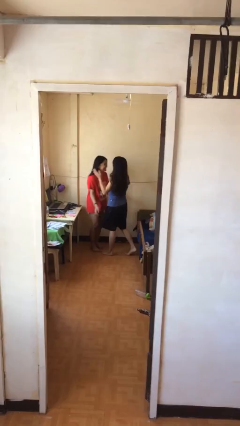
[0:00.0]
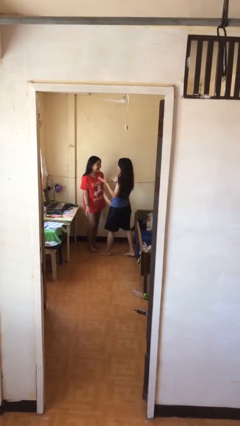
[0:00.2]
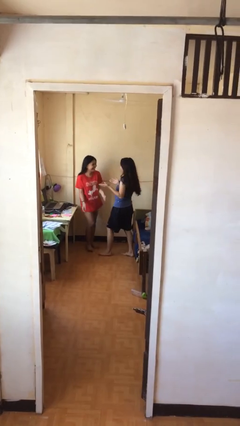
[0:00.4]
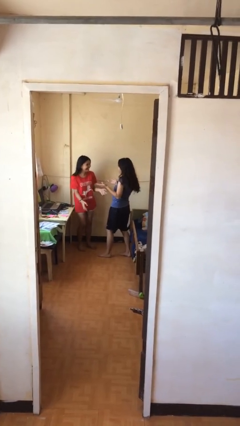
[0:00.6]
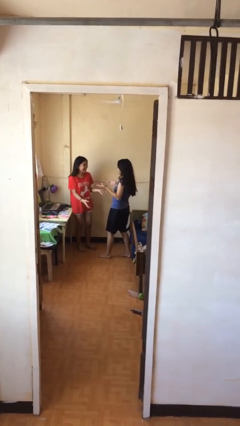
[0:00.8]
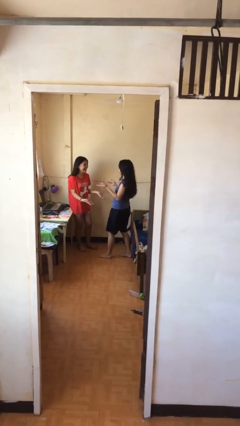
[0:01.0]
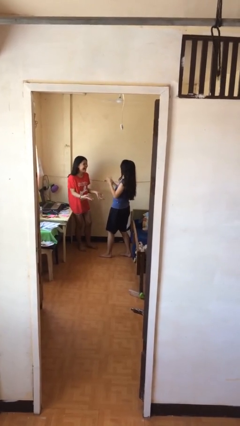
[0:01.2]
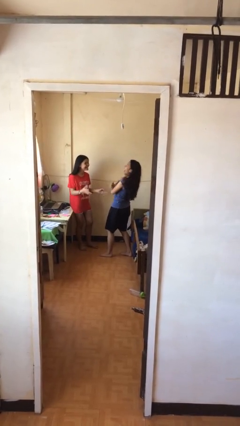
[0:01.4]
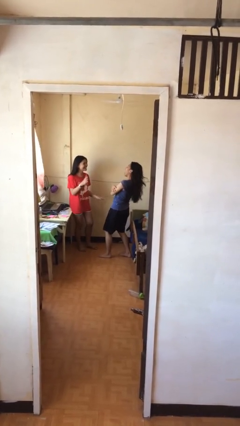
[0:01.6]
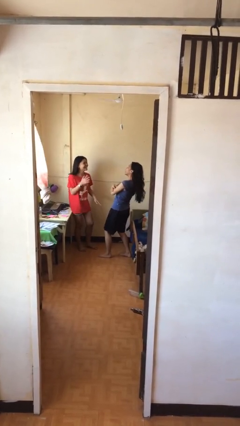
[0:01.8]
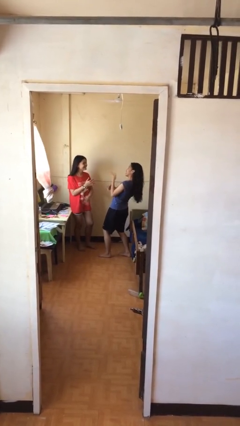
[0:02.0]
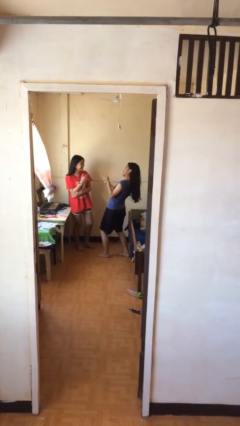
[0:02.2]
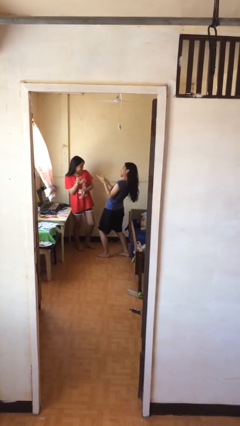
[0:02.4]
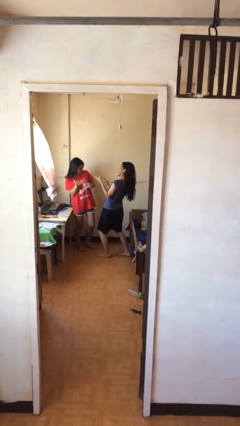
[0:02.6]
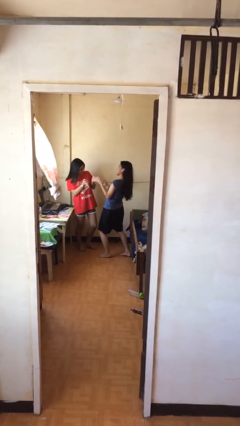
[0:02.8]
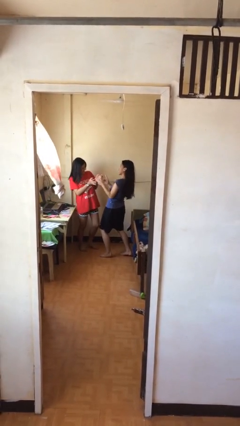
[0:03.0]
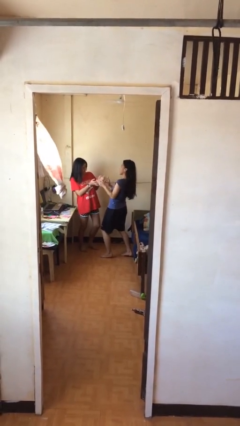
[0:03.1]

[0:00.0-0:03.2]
person talks to person

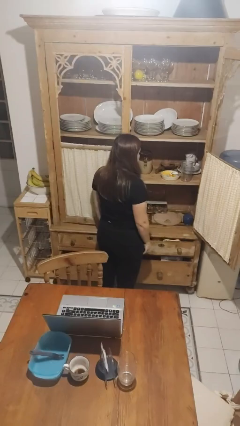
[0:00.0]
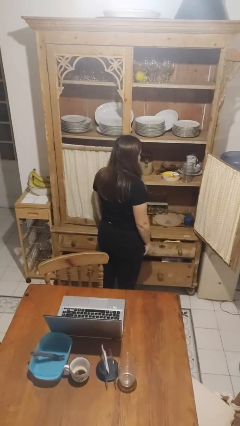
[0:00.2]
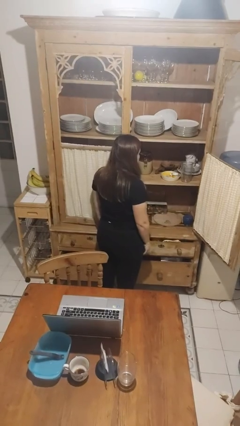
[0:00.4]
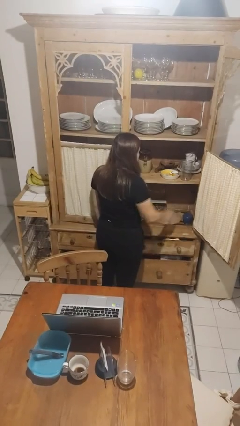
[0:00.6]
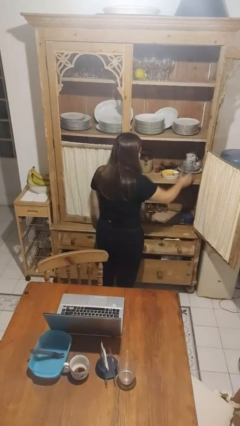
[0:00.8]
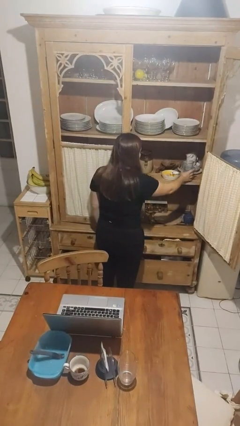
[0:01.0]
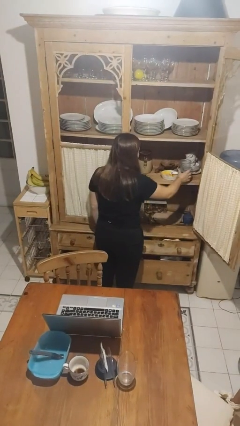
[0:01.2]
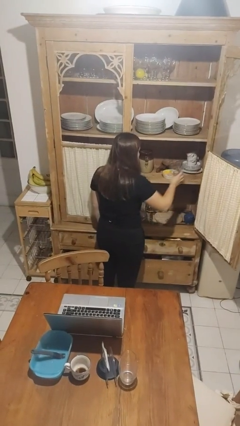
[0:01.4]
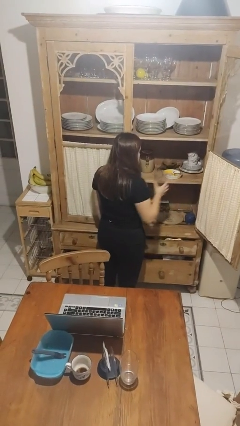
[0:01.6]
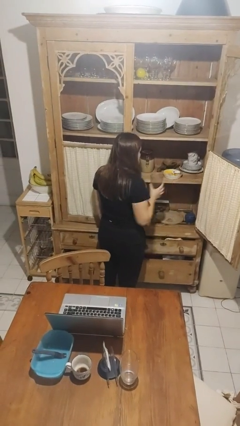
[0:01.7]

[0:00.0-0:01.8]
person takes object from cabinet

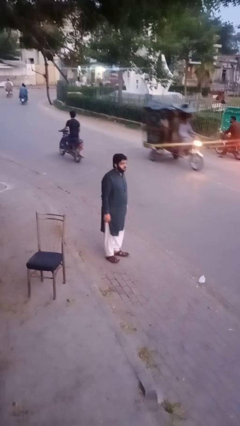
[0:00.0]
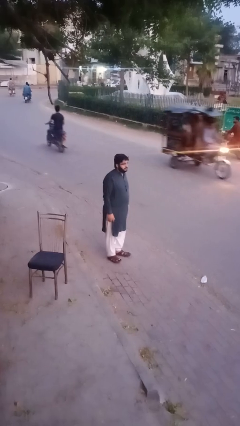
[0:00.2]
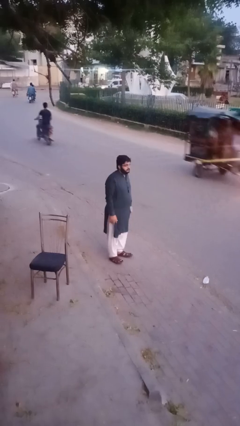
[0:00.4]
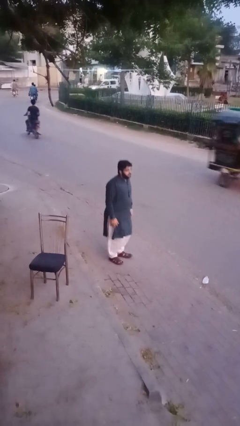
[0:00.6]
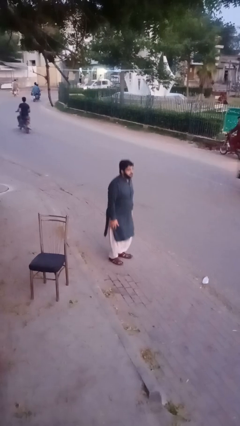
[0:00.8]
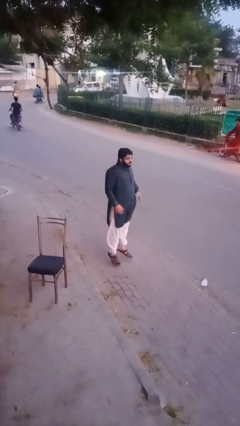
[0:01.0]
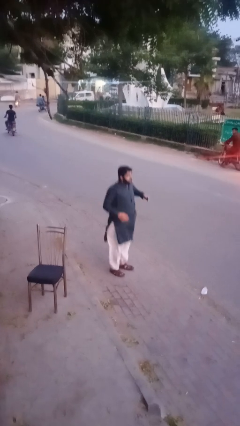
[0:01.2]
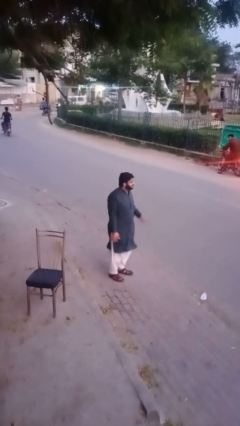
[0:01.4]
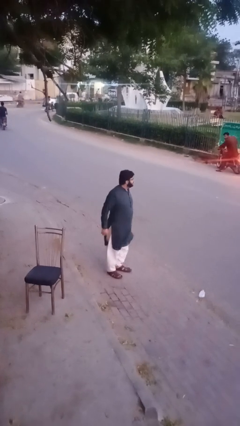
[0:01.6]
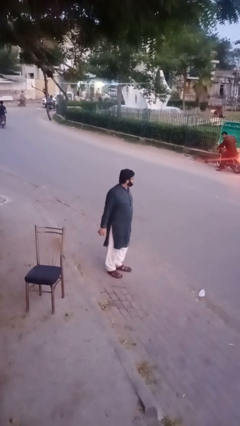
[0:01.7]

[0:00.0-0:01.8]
person jumps

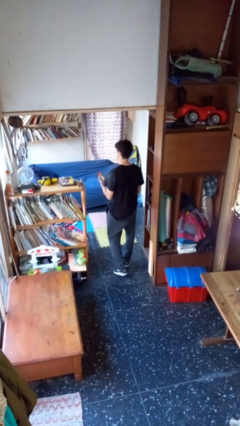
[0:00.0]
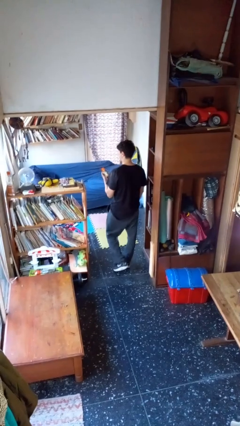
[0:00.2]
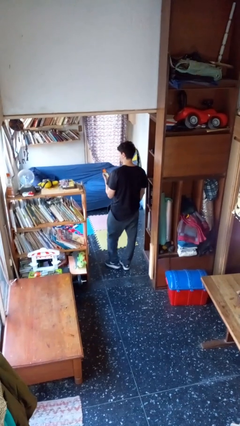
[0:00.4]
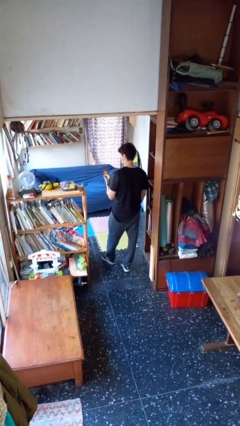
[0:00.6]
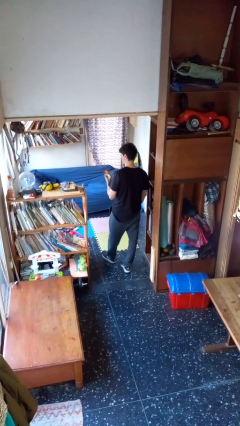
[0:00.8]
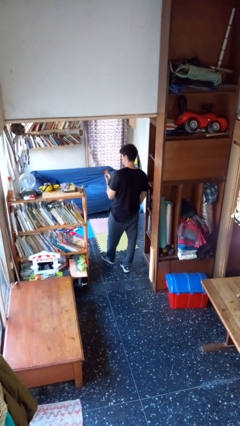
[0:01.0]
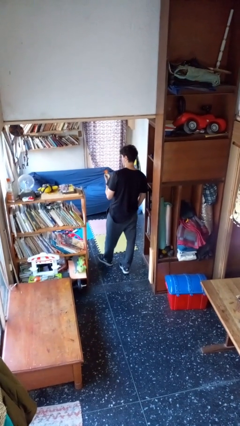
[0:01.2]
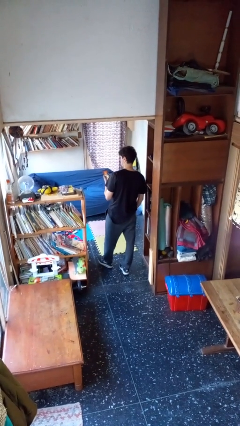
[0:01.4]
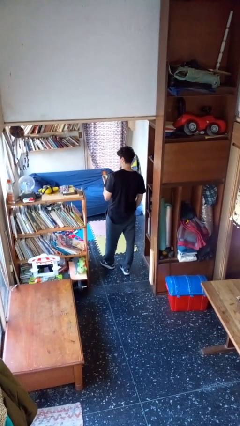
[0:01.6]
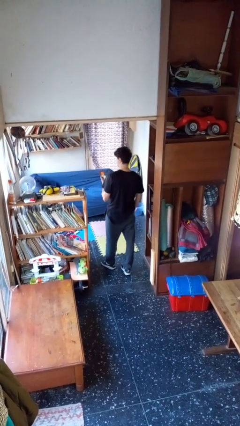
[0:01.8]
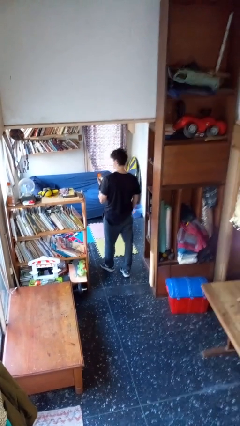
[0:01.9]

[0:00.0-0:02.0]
person takes phone from pocket

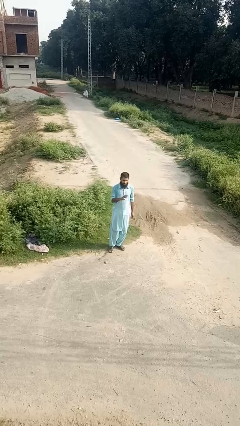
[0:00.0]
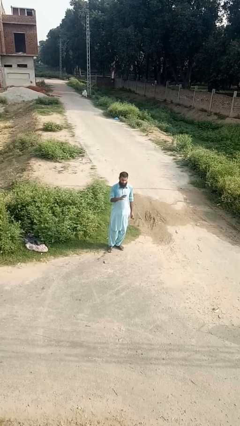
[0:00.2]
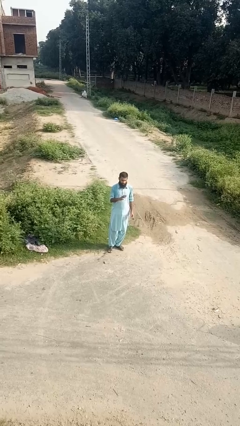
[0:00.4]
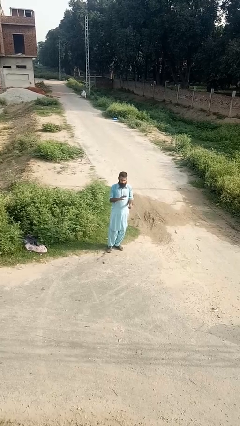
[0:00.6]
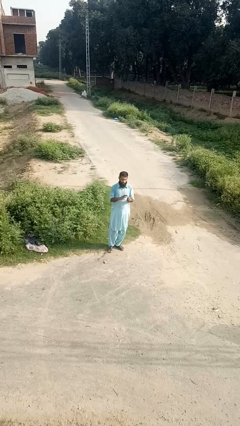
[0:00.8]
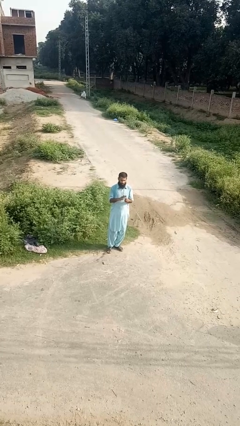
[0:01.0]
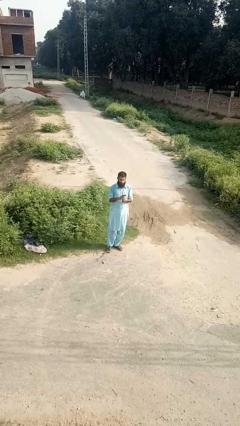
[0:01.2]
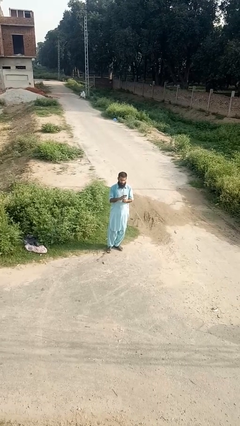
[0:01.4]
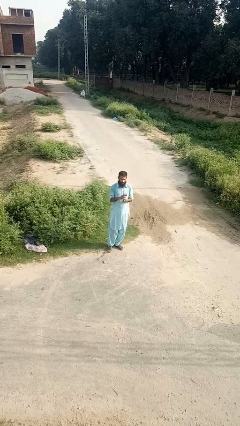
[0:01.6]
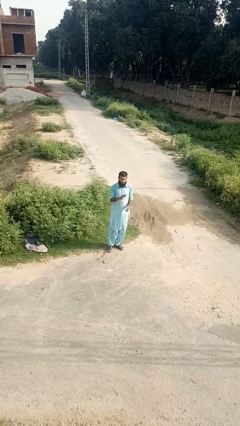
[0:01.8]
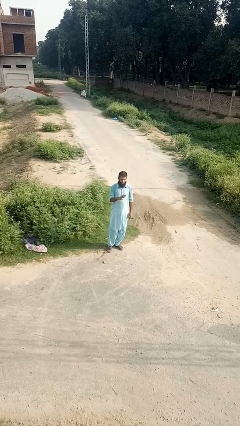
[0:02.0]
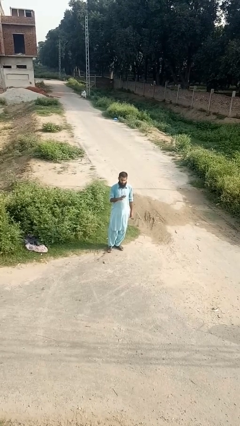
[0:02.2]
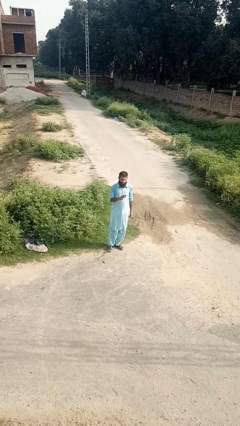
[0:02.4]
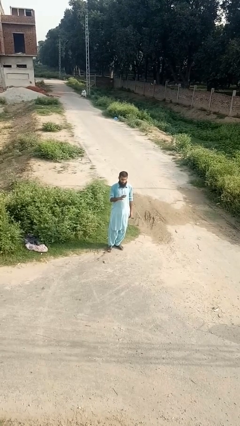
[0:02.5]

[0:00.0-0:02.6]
person puts on ring

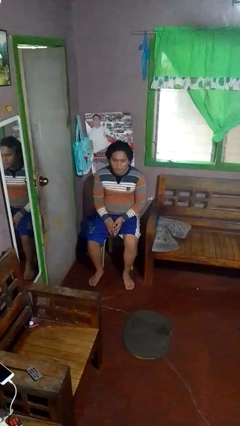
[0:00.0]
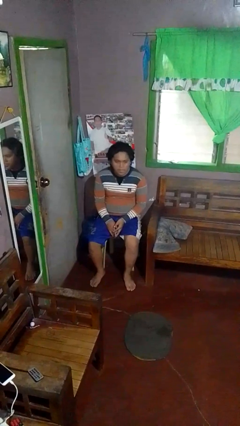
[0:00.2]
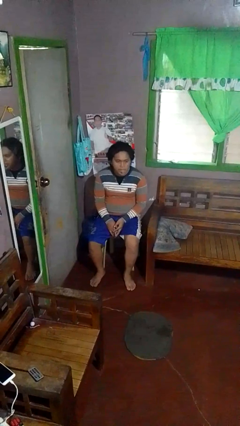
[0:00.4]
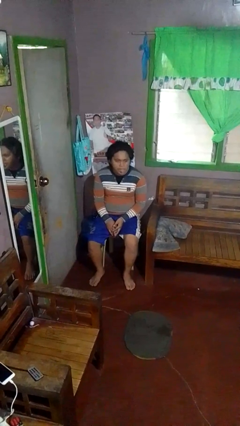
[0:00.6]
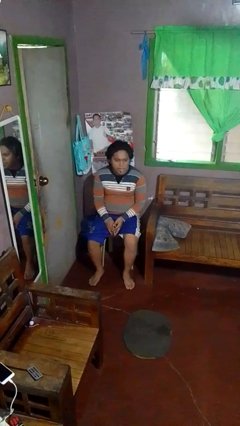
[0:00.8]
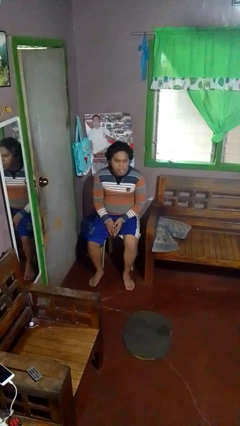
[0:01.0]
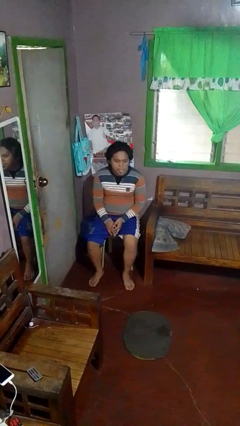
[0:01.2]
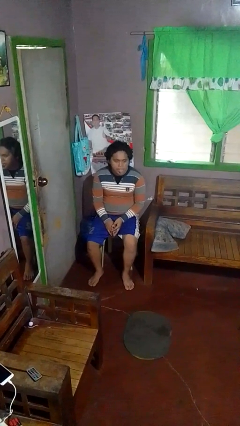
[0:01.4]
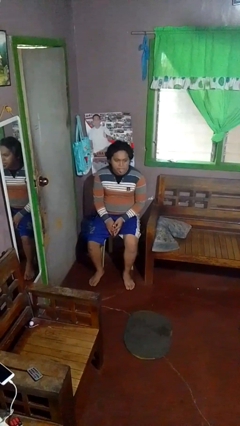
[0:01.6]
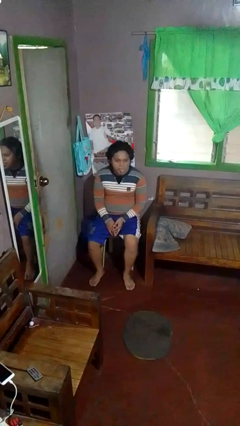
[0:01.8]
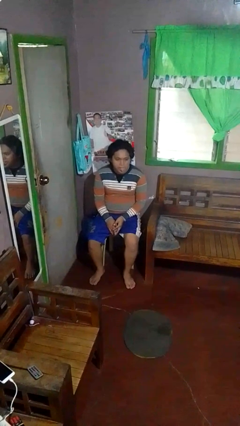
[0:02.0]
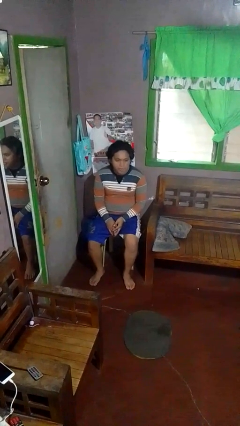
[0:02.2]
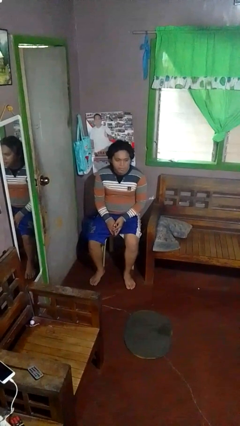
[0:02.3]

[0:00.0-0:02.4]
person sticks out tongue

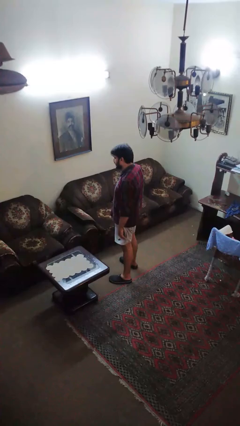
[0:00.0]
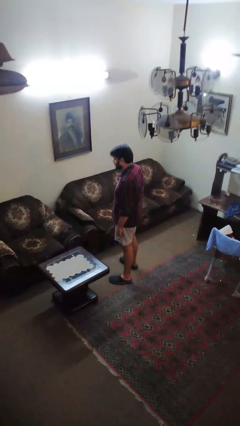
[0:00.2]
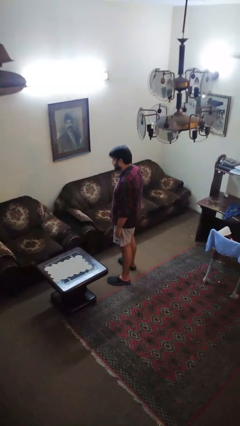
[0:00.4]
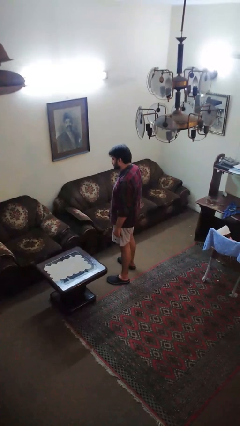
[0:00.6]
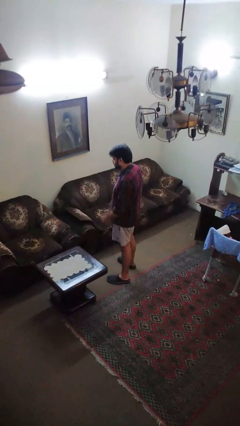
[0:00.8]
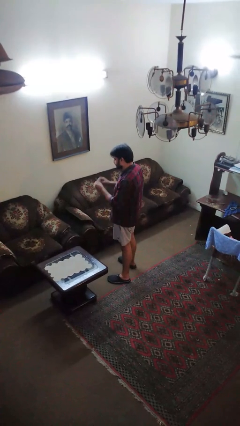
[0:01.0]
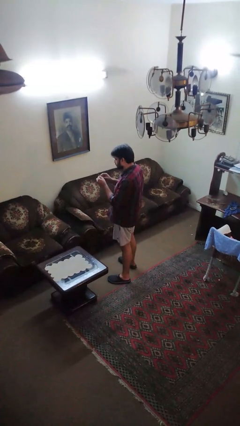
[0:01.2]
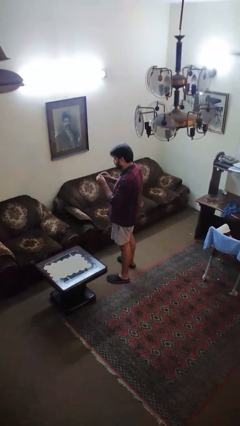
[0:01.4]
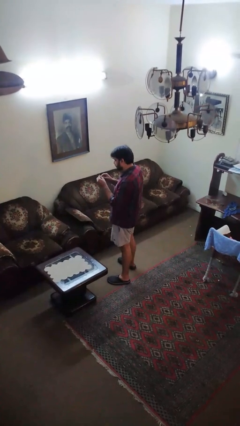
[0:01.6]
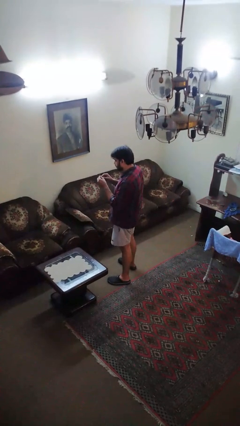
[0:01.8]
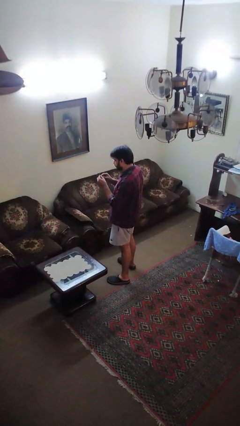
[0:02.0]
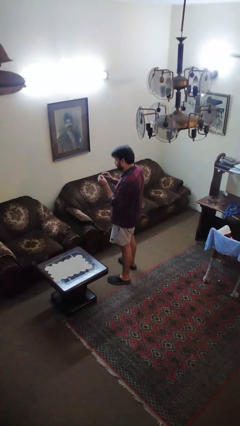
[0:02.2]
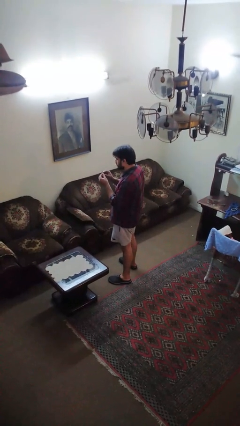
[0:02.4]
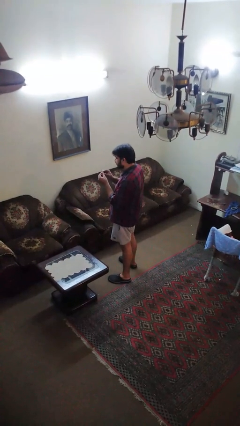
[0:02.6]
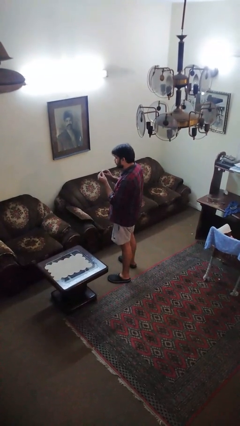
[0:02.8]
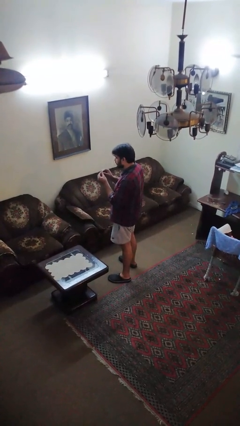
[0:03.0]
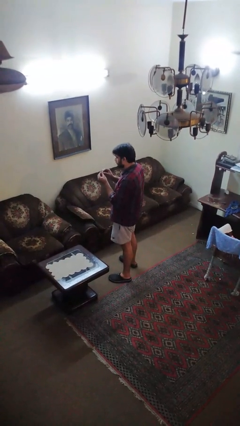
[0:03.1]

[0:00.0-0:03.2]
person files fingernails
